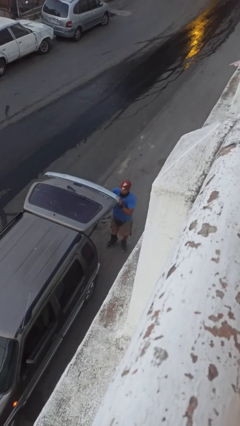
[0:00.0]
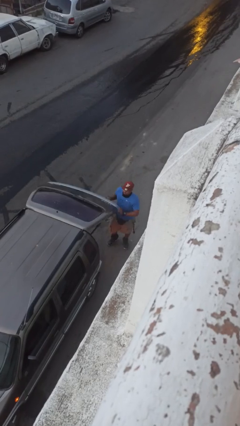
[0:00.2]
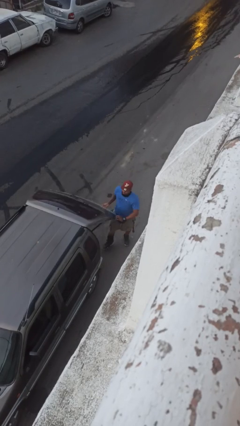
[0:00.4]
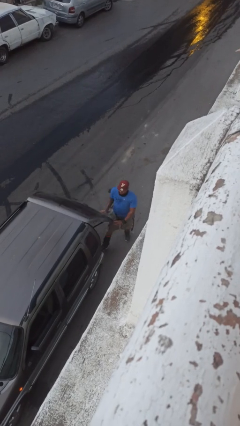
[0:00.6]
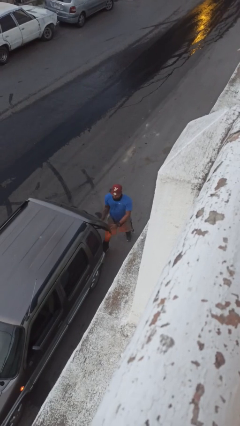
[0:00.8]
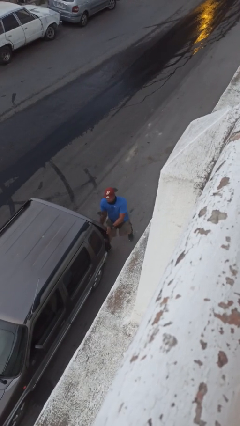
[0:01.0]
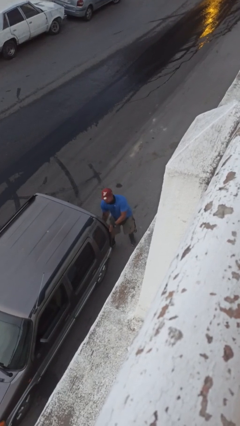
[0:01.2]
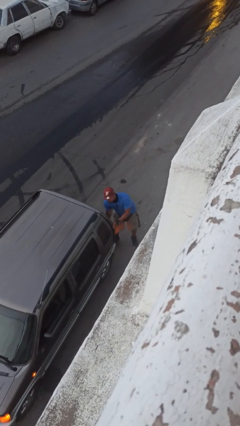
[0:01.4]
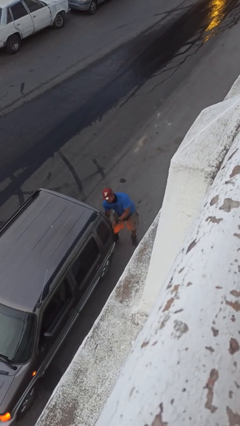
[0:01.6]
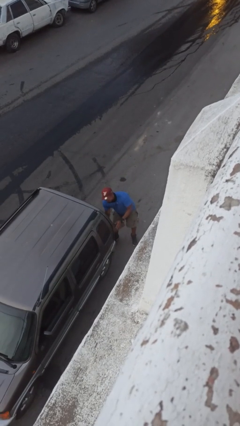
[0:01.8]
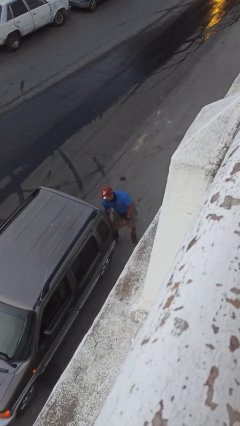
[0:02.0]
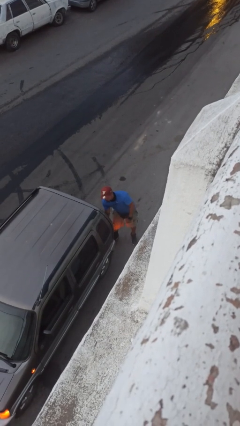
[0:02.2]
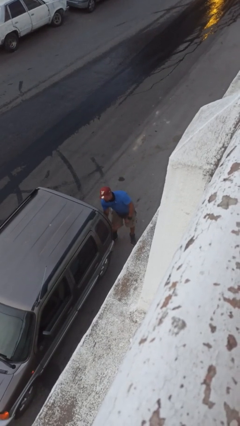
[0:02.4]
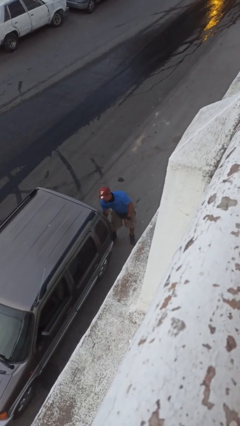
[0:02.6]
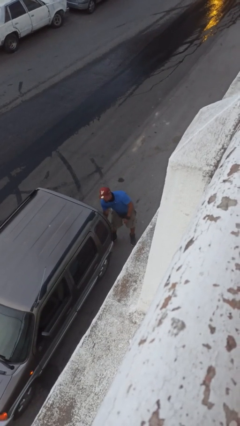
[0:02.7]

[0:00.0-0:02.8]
person closes car trunk

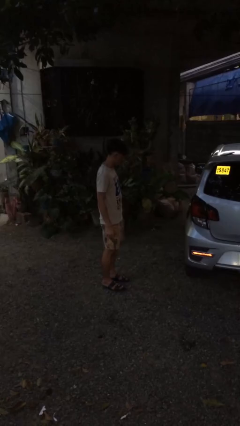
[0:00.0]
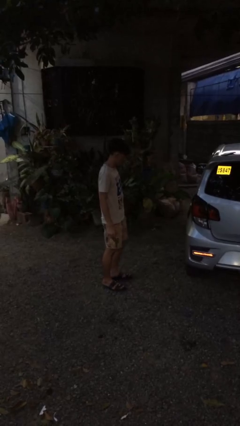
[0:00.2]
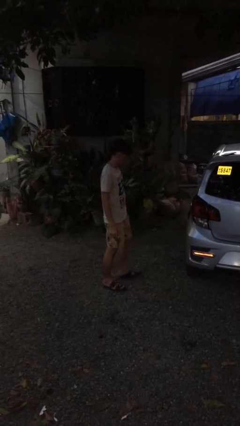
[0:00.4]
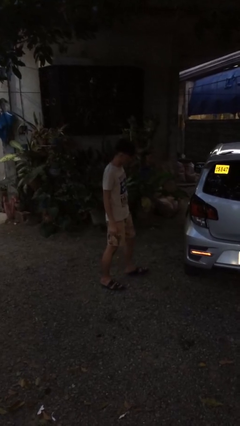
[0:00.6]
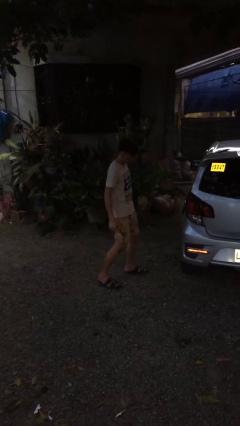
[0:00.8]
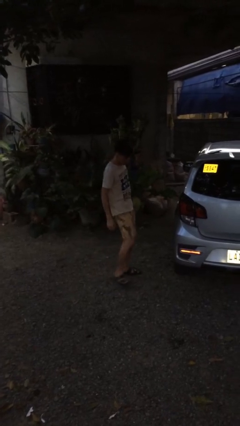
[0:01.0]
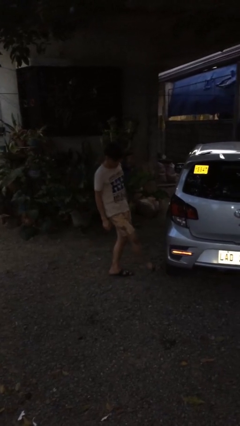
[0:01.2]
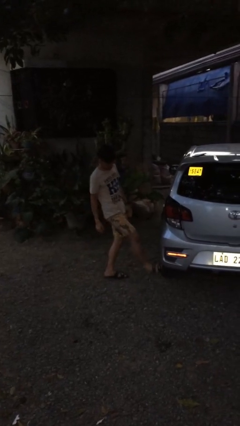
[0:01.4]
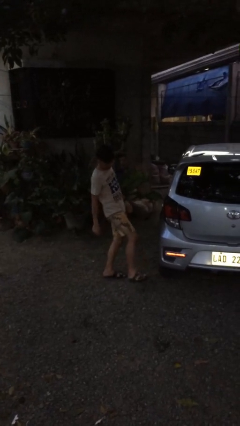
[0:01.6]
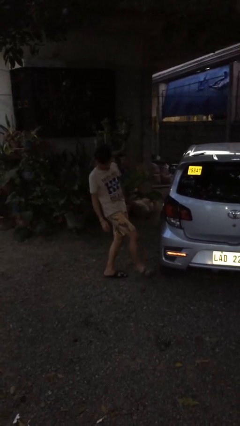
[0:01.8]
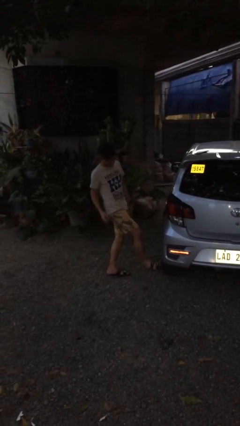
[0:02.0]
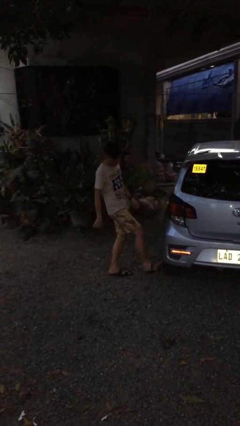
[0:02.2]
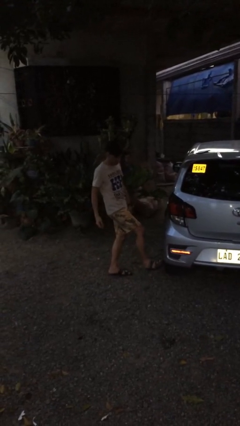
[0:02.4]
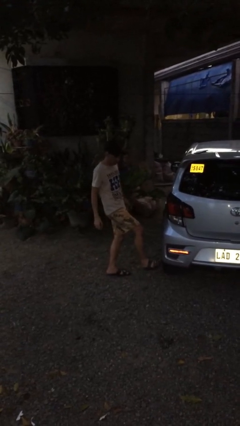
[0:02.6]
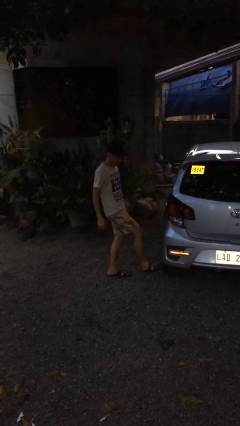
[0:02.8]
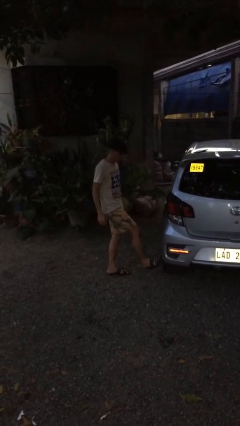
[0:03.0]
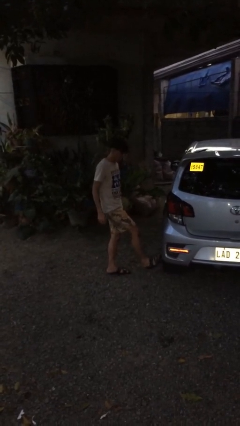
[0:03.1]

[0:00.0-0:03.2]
person kicks car tires

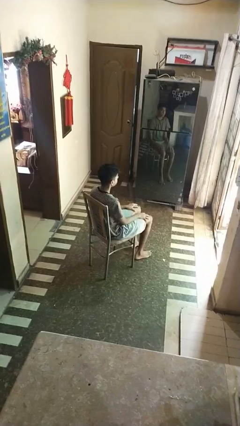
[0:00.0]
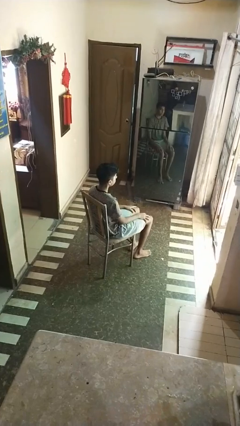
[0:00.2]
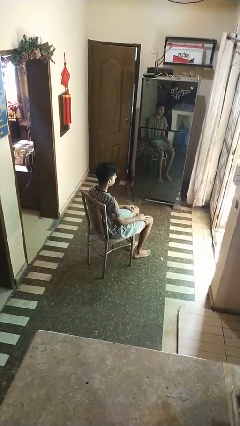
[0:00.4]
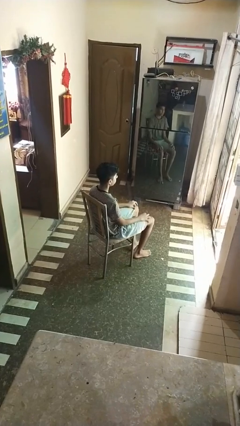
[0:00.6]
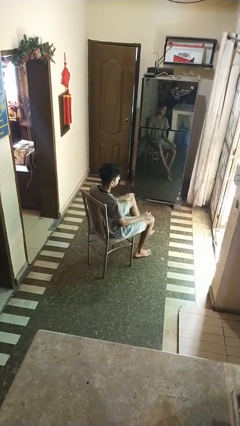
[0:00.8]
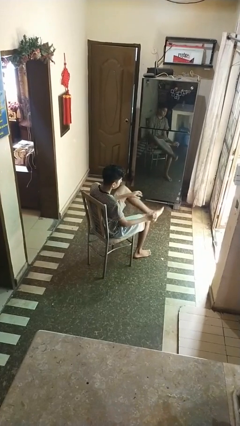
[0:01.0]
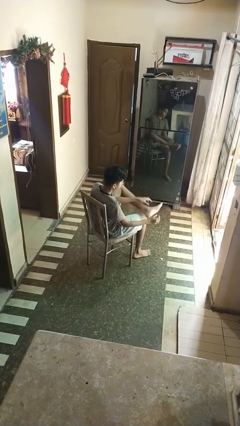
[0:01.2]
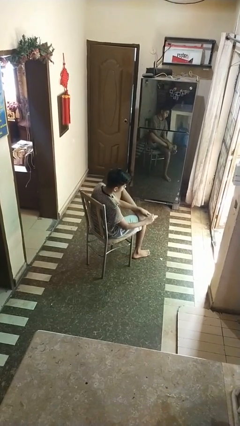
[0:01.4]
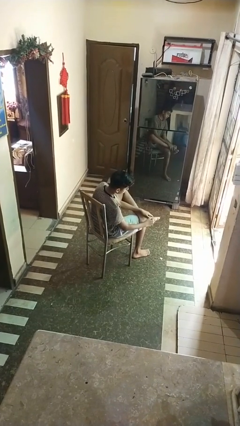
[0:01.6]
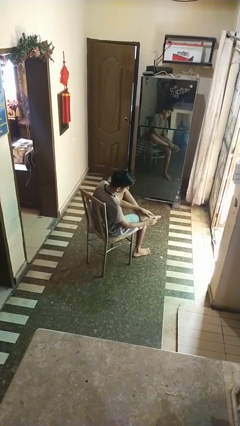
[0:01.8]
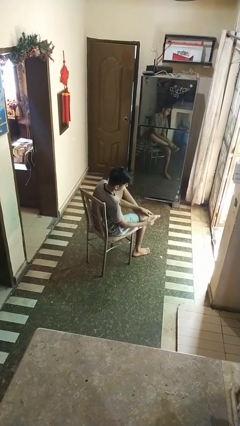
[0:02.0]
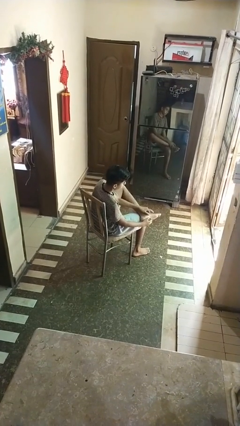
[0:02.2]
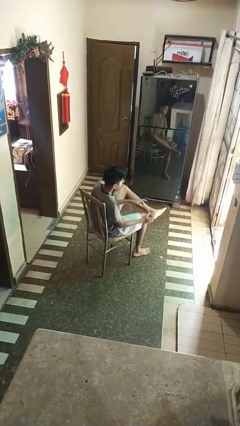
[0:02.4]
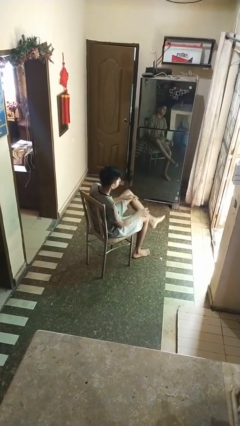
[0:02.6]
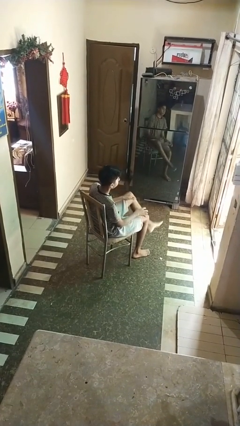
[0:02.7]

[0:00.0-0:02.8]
person rubs foot

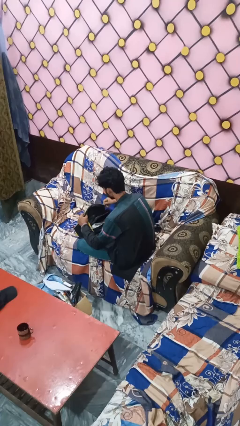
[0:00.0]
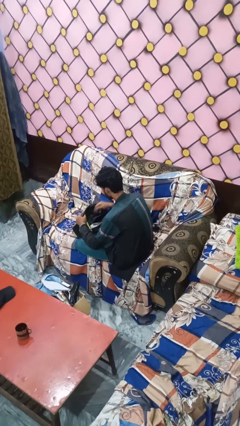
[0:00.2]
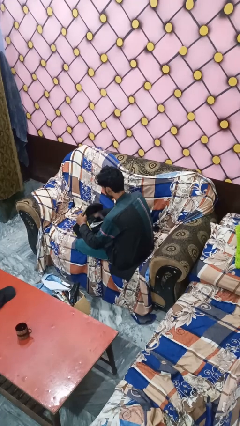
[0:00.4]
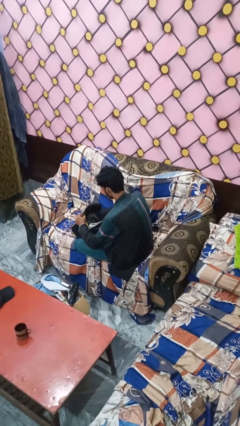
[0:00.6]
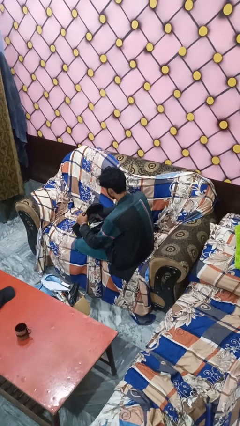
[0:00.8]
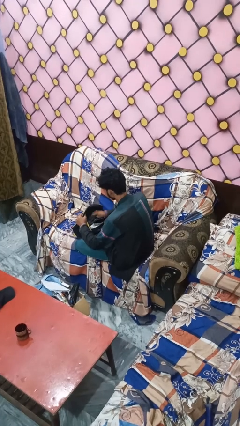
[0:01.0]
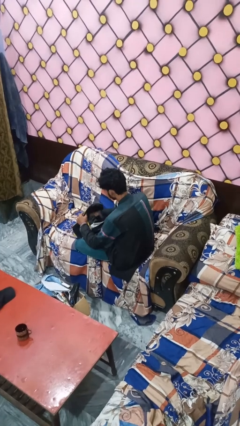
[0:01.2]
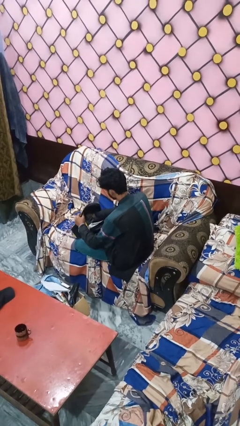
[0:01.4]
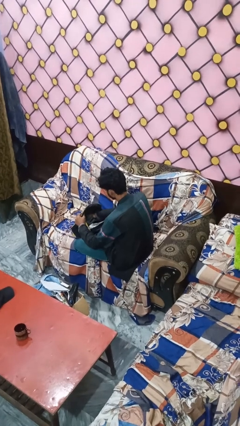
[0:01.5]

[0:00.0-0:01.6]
person searches in bag

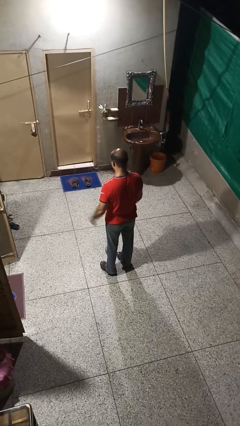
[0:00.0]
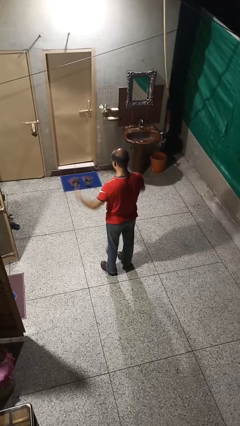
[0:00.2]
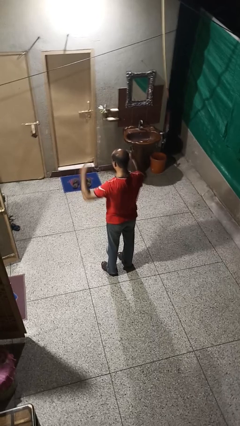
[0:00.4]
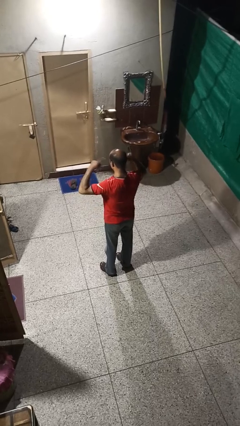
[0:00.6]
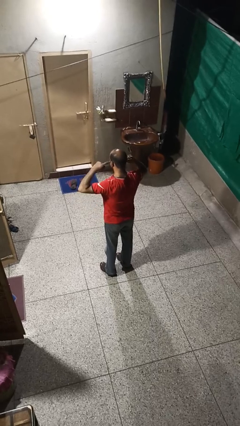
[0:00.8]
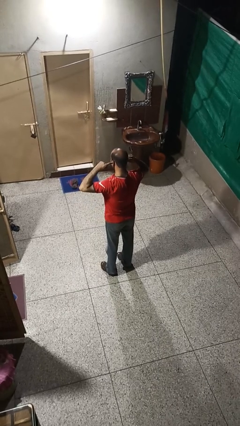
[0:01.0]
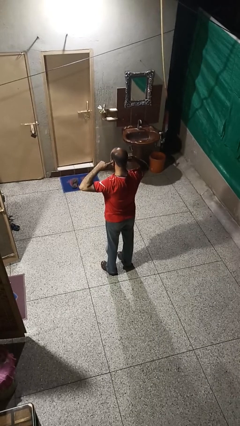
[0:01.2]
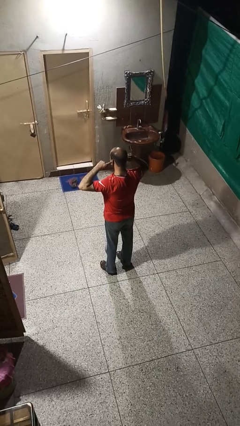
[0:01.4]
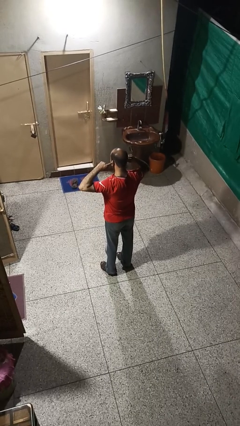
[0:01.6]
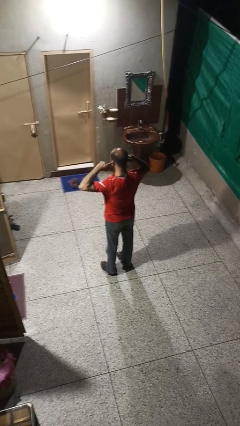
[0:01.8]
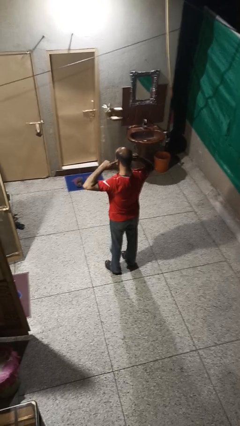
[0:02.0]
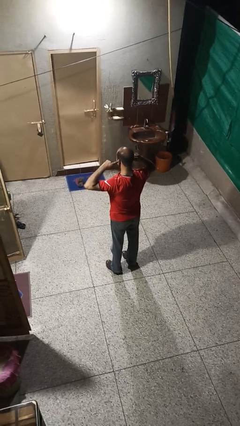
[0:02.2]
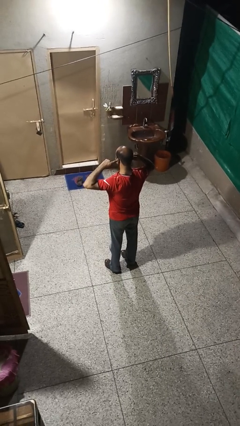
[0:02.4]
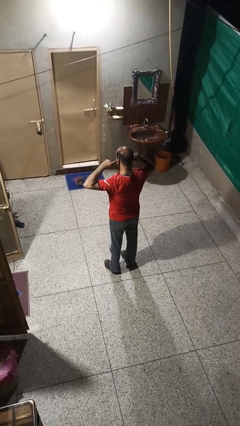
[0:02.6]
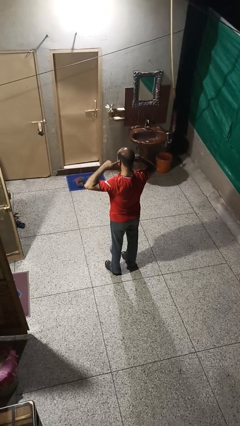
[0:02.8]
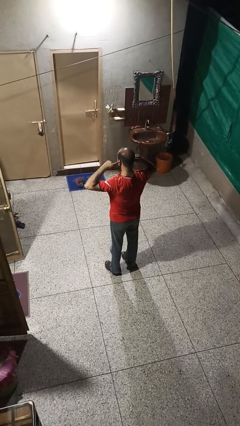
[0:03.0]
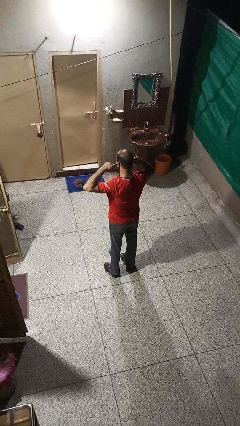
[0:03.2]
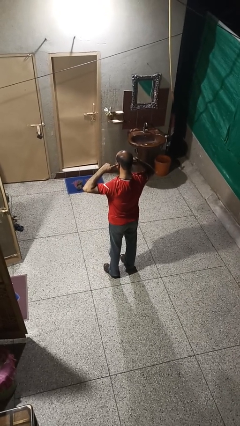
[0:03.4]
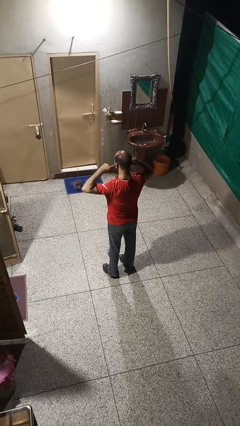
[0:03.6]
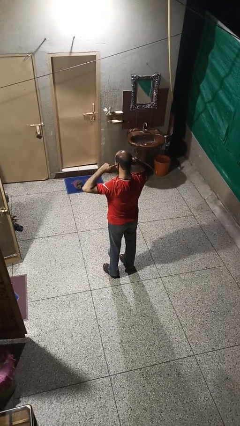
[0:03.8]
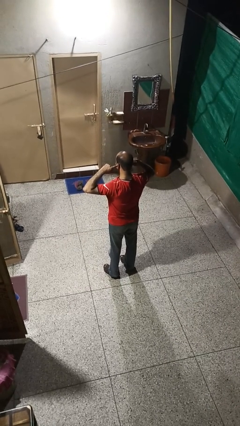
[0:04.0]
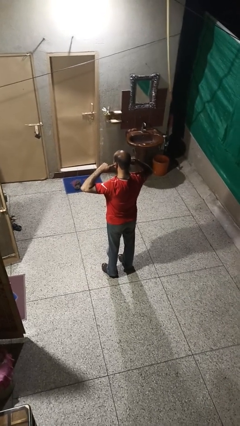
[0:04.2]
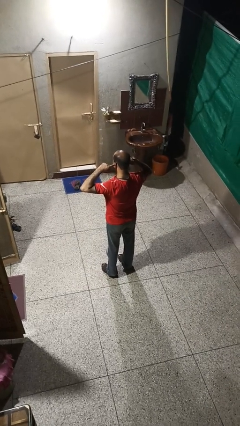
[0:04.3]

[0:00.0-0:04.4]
person puts fingers in ear

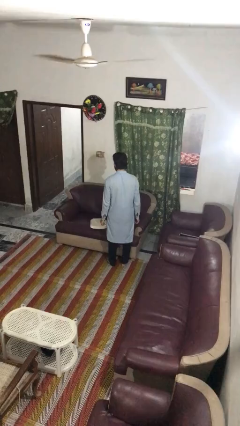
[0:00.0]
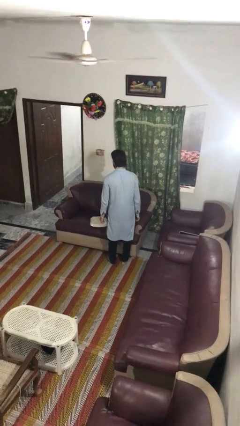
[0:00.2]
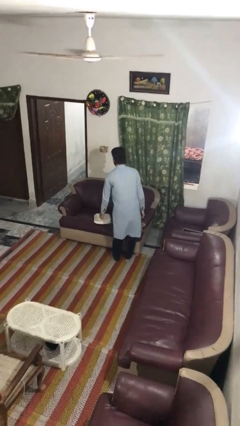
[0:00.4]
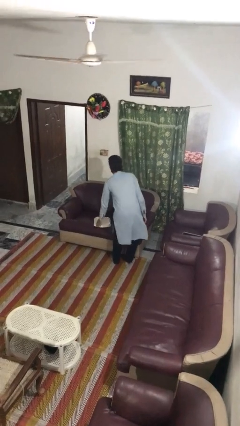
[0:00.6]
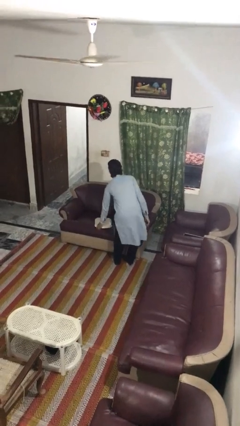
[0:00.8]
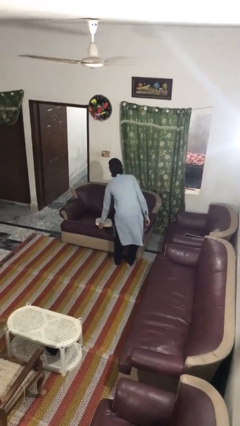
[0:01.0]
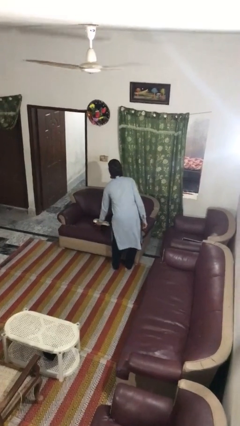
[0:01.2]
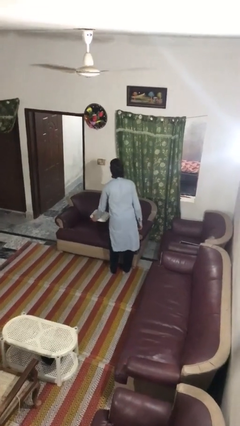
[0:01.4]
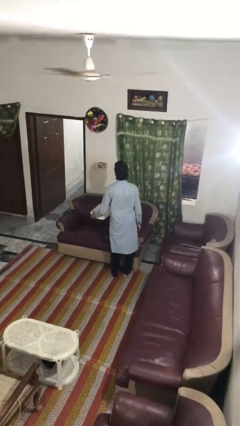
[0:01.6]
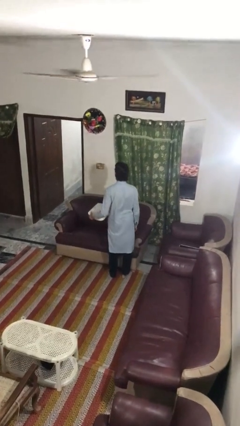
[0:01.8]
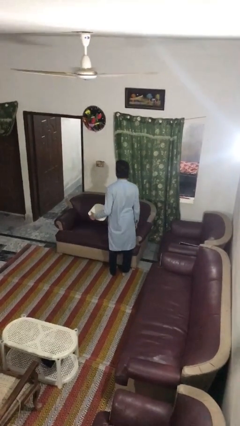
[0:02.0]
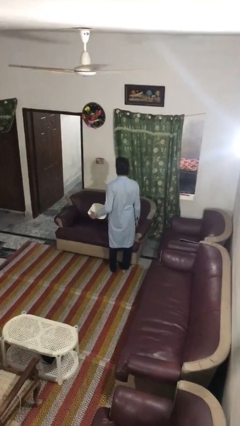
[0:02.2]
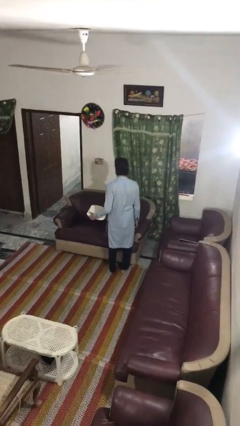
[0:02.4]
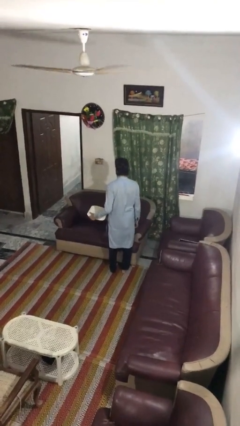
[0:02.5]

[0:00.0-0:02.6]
person picks up object from couch
